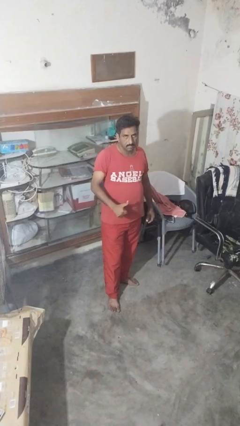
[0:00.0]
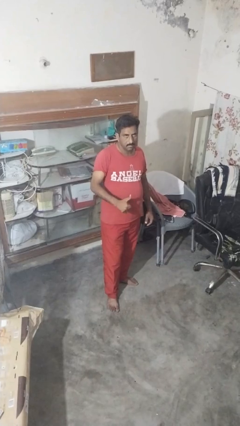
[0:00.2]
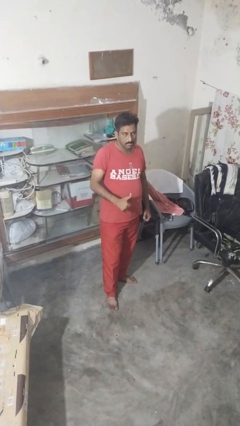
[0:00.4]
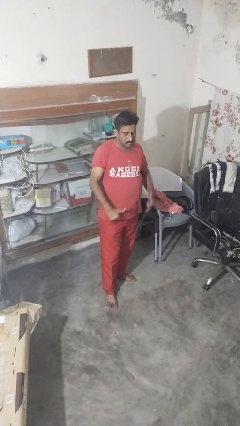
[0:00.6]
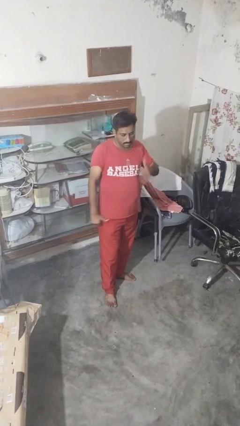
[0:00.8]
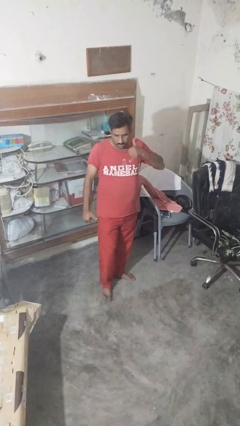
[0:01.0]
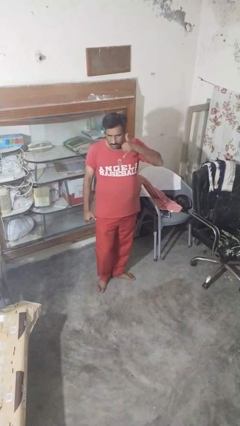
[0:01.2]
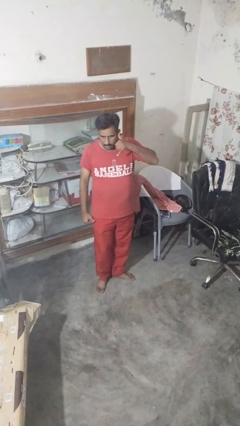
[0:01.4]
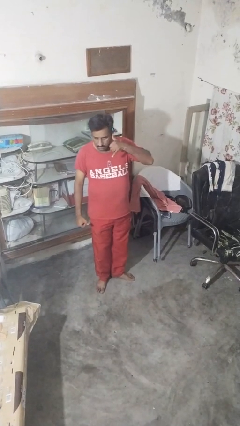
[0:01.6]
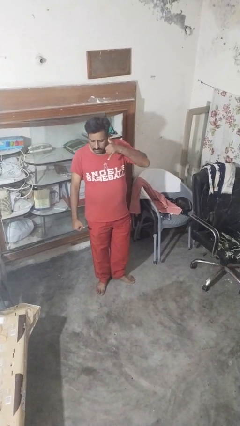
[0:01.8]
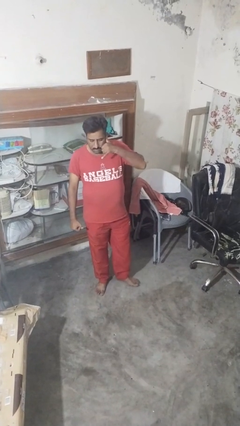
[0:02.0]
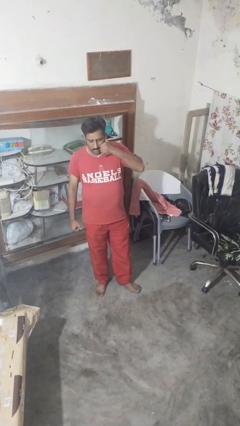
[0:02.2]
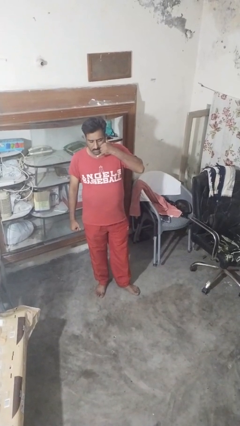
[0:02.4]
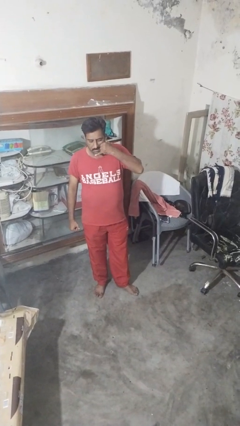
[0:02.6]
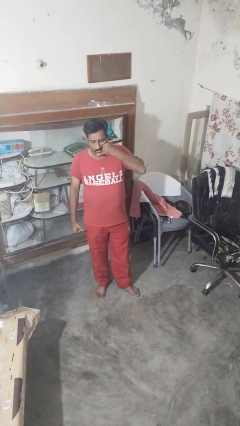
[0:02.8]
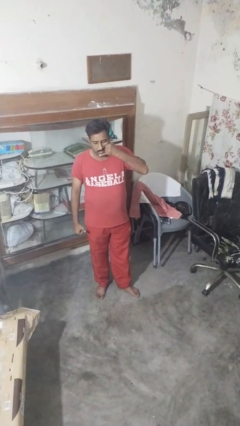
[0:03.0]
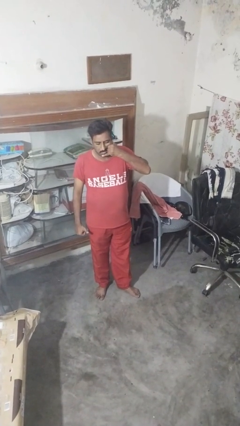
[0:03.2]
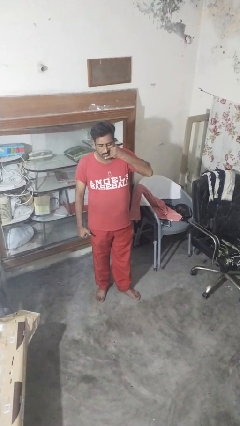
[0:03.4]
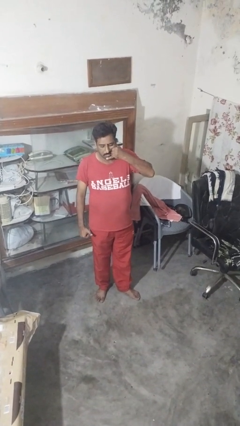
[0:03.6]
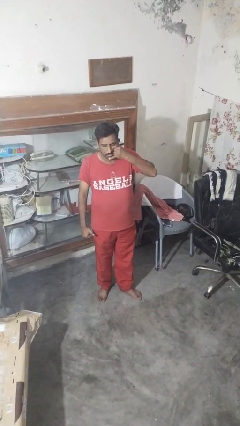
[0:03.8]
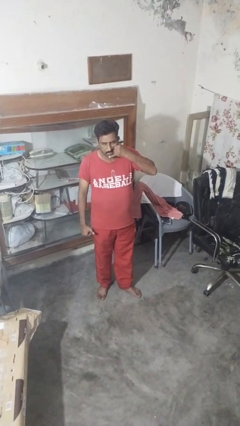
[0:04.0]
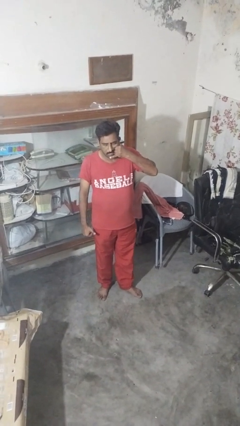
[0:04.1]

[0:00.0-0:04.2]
person gestures call me

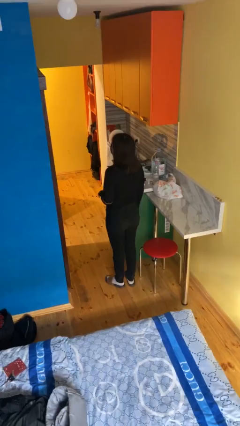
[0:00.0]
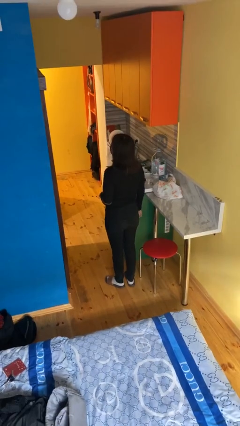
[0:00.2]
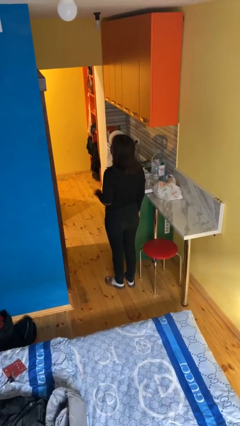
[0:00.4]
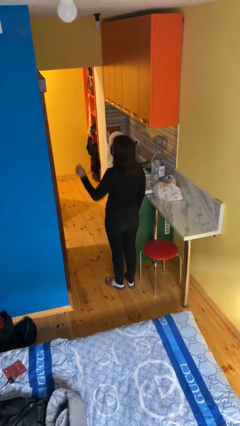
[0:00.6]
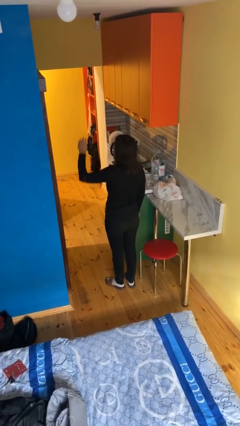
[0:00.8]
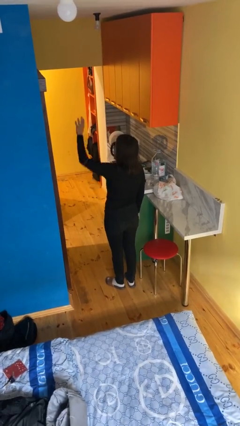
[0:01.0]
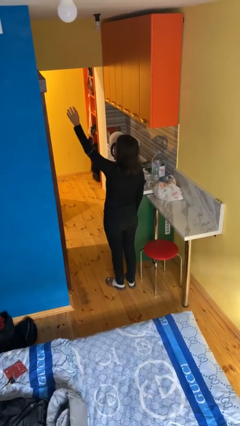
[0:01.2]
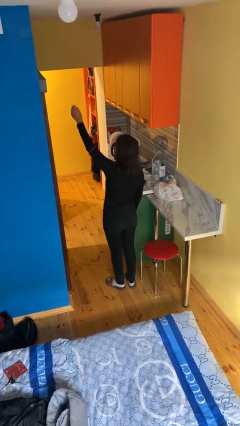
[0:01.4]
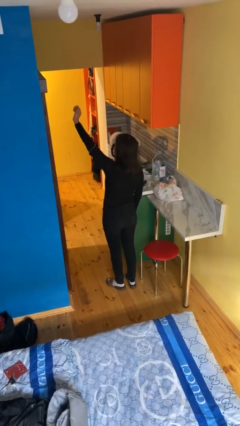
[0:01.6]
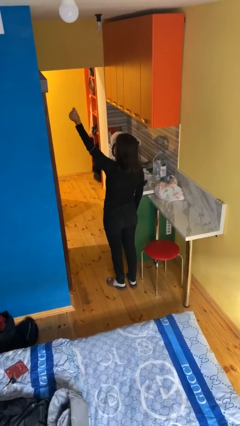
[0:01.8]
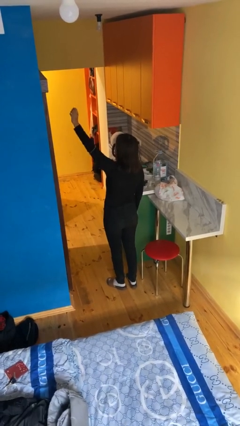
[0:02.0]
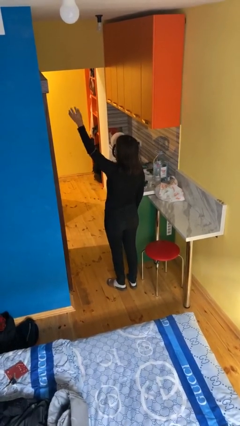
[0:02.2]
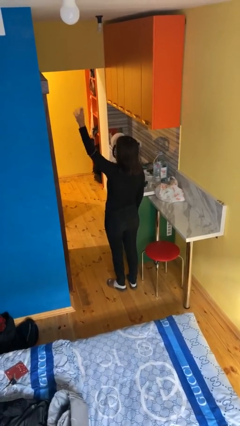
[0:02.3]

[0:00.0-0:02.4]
person gestures raise hand

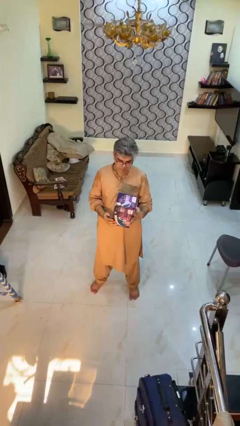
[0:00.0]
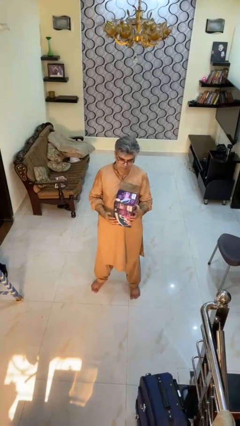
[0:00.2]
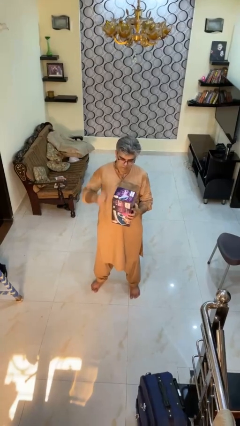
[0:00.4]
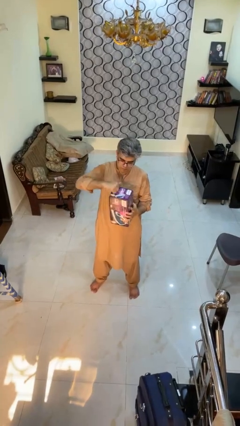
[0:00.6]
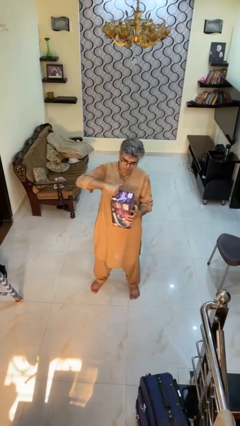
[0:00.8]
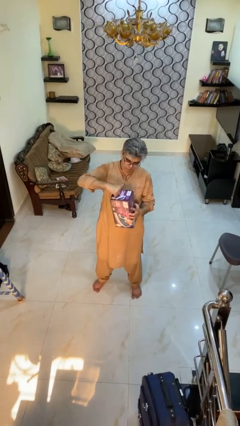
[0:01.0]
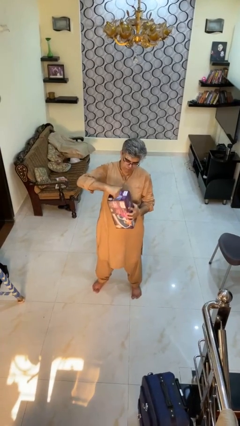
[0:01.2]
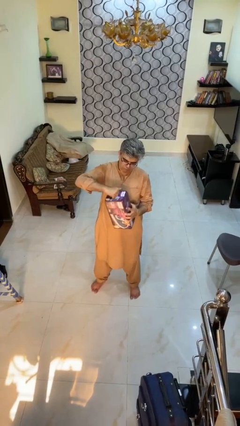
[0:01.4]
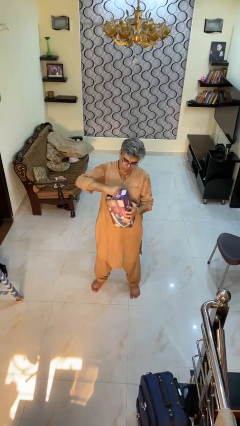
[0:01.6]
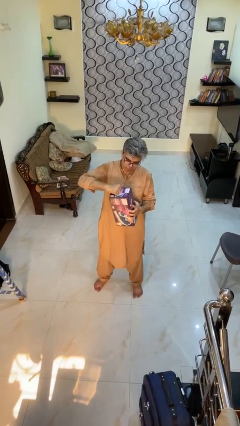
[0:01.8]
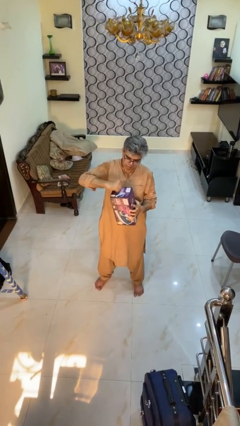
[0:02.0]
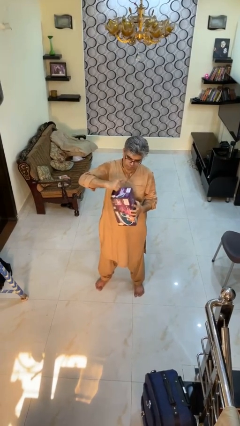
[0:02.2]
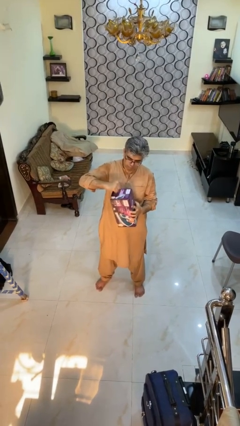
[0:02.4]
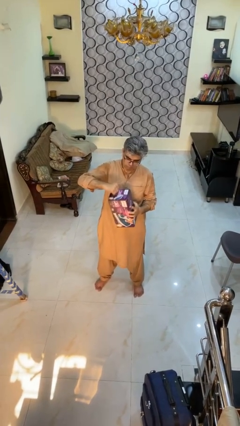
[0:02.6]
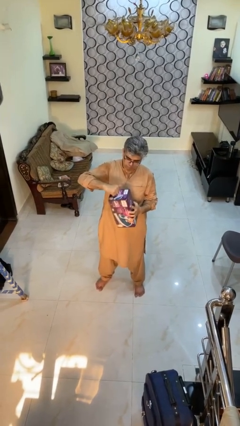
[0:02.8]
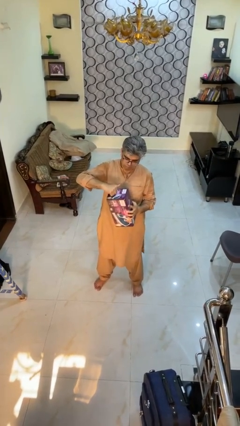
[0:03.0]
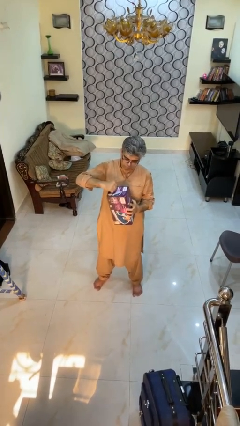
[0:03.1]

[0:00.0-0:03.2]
person taps object with finger

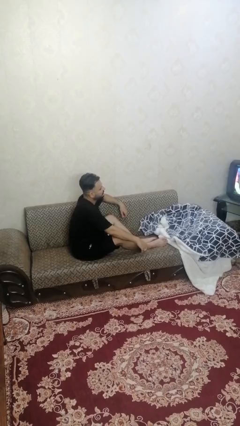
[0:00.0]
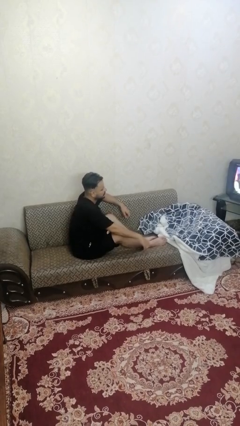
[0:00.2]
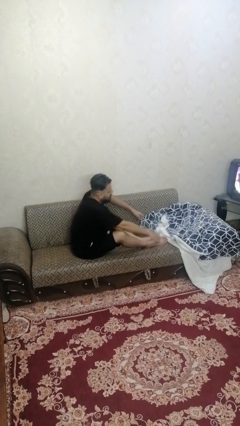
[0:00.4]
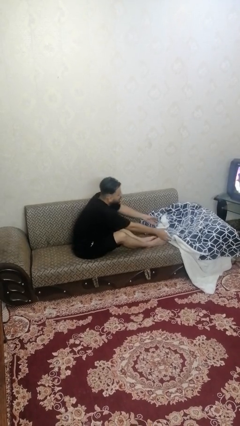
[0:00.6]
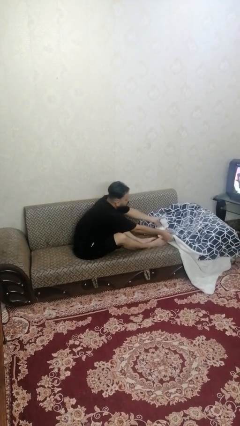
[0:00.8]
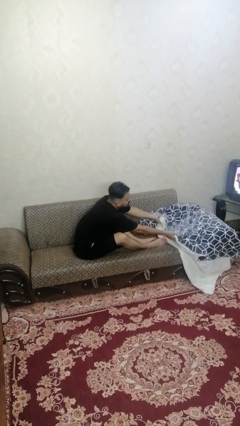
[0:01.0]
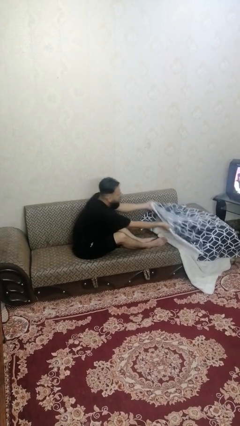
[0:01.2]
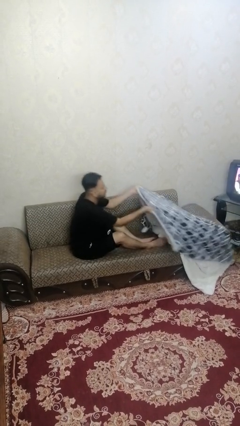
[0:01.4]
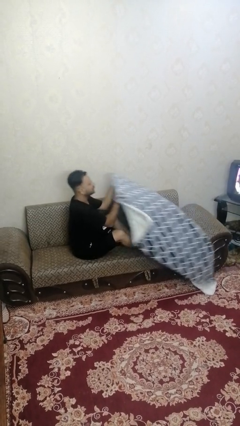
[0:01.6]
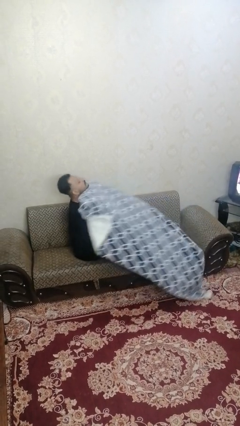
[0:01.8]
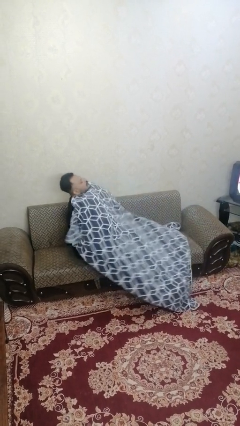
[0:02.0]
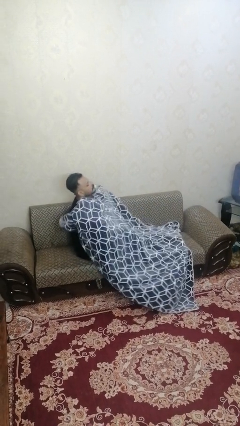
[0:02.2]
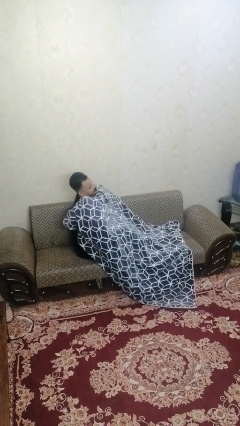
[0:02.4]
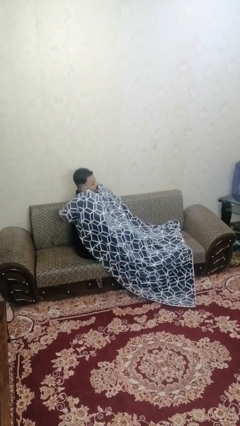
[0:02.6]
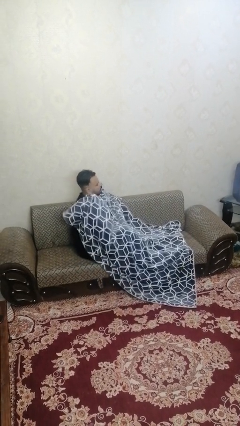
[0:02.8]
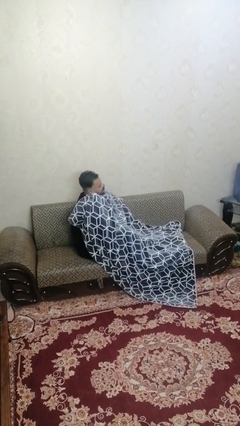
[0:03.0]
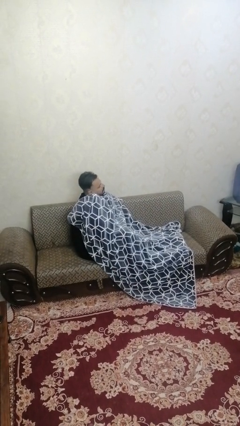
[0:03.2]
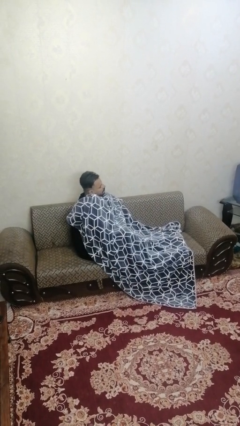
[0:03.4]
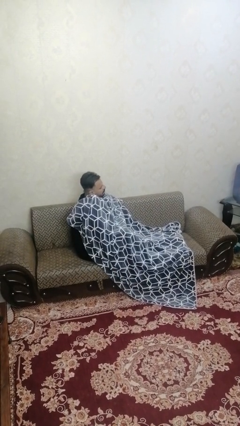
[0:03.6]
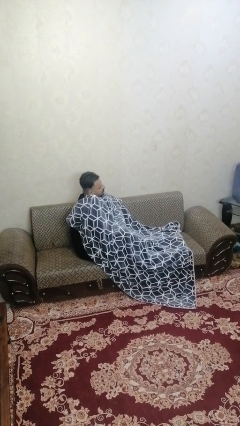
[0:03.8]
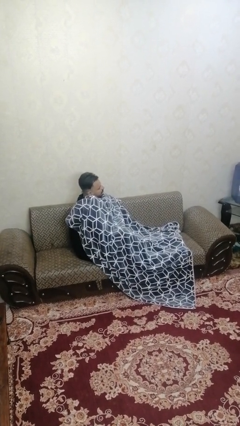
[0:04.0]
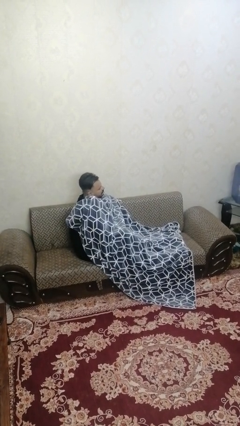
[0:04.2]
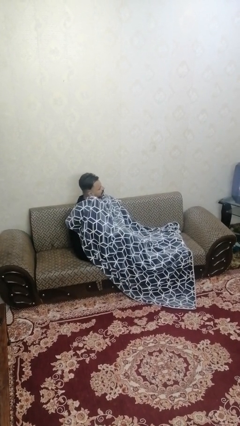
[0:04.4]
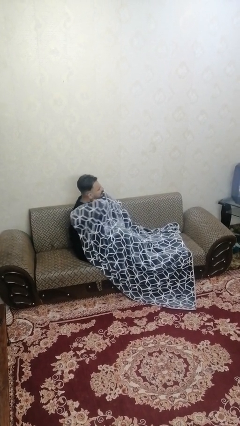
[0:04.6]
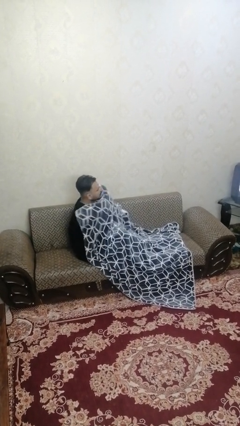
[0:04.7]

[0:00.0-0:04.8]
person covers with blanket

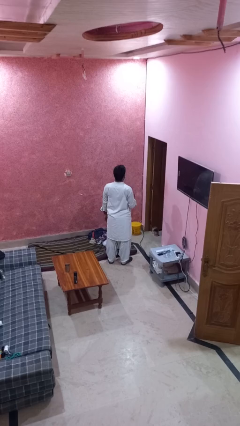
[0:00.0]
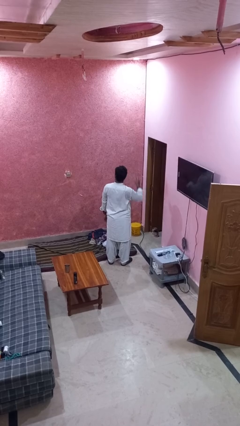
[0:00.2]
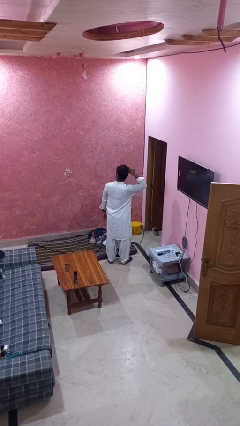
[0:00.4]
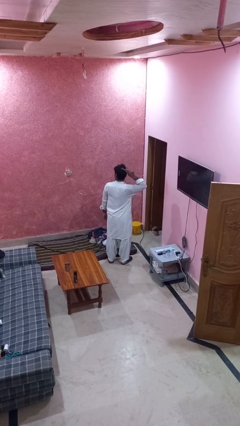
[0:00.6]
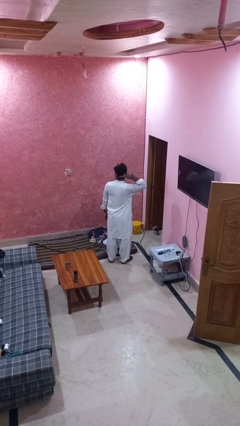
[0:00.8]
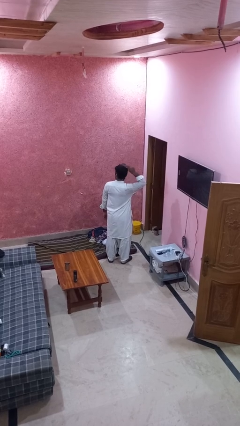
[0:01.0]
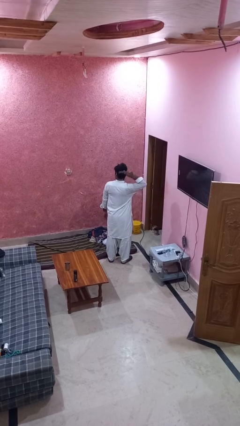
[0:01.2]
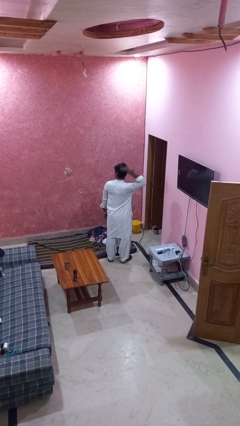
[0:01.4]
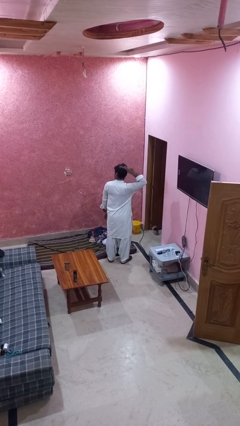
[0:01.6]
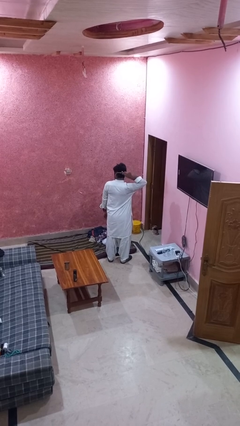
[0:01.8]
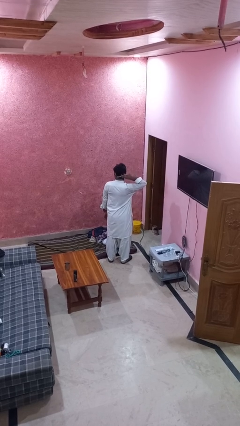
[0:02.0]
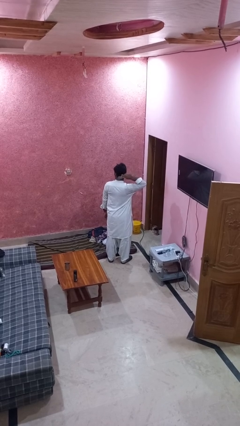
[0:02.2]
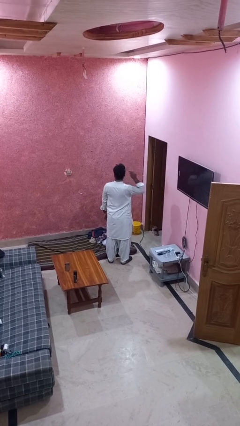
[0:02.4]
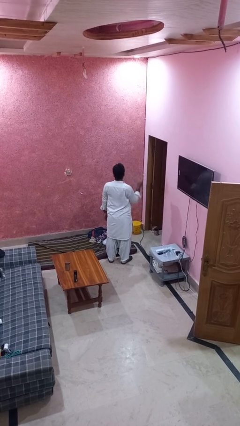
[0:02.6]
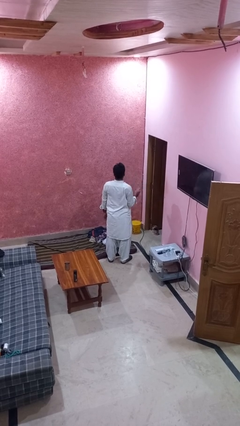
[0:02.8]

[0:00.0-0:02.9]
person brushes hair

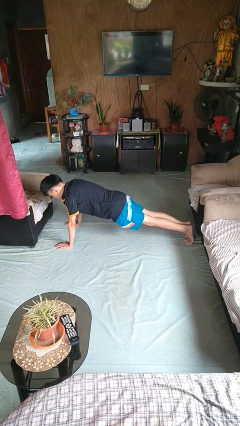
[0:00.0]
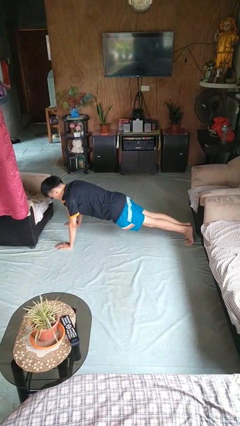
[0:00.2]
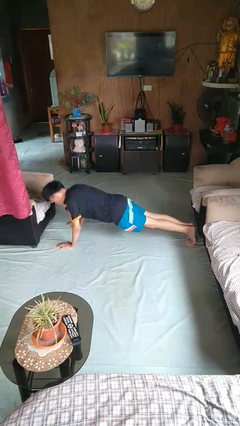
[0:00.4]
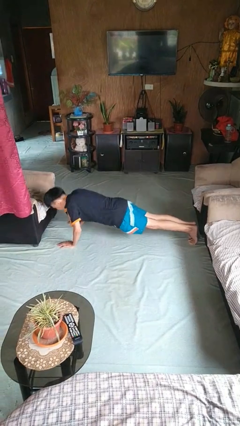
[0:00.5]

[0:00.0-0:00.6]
person exercises with pushup
